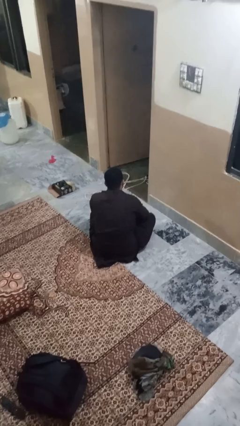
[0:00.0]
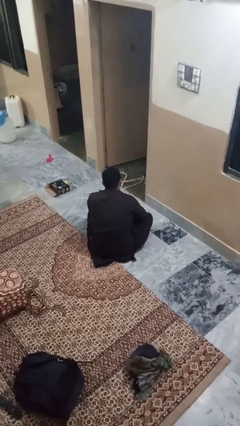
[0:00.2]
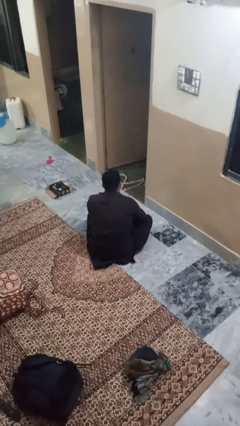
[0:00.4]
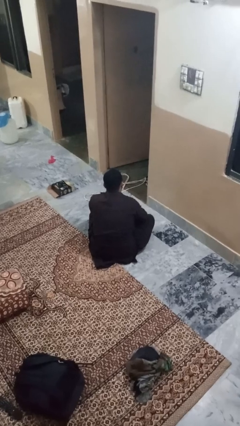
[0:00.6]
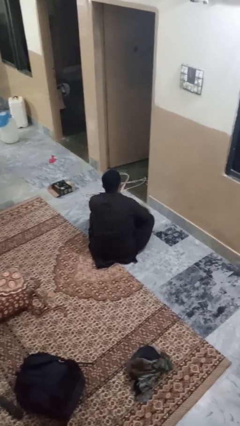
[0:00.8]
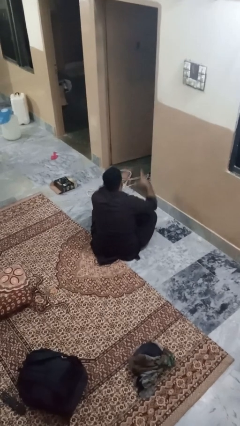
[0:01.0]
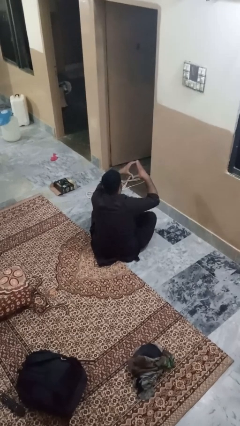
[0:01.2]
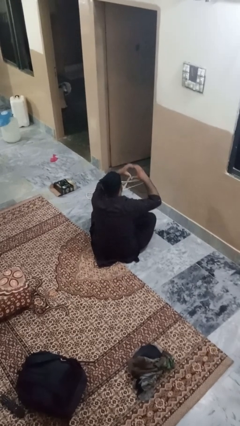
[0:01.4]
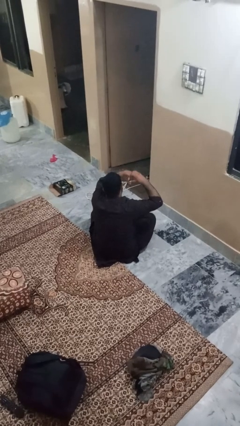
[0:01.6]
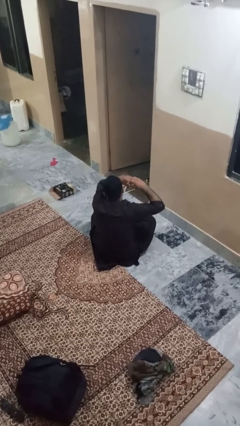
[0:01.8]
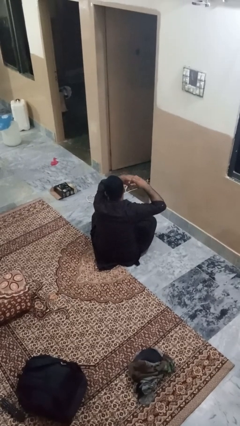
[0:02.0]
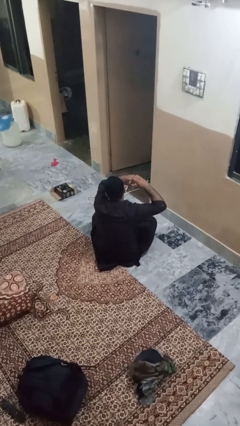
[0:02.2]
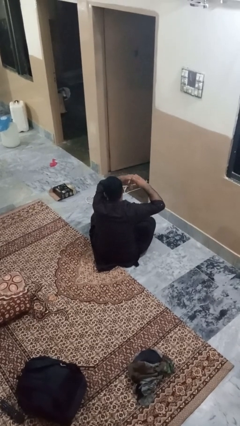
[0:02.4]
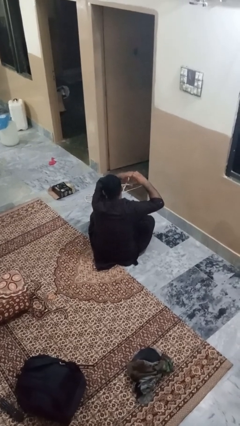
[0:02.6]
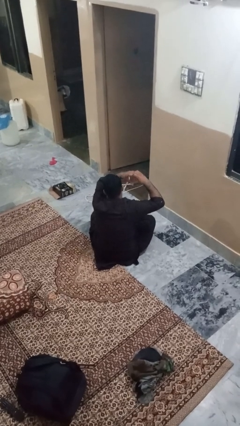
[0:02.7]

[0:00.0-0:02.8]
person gestures heart

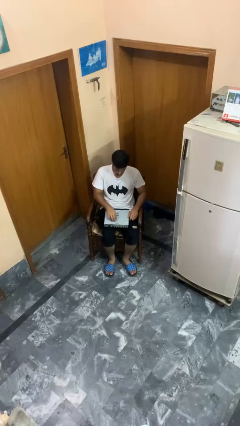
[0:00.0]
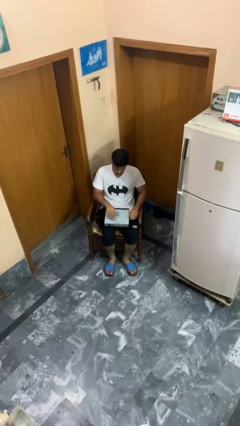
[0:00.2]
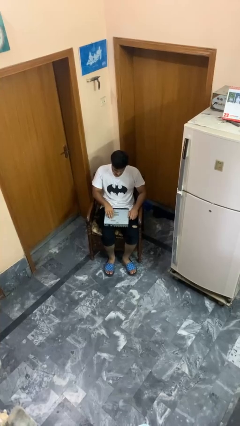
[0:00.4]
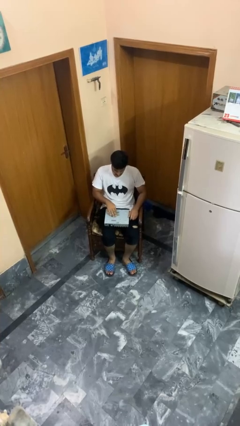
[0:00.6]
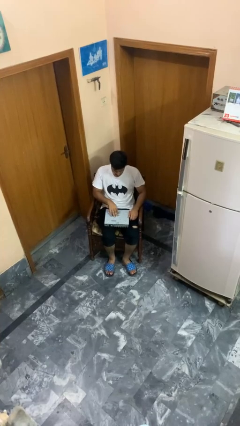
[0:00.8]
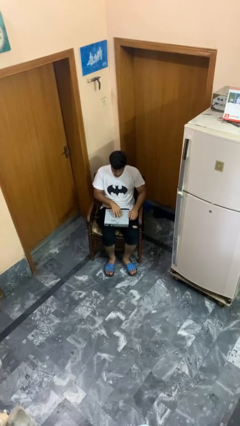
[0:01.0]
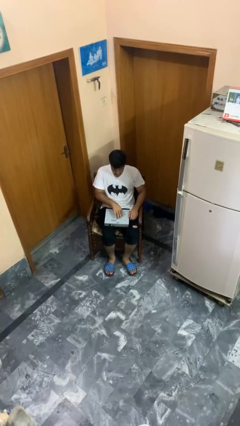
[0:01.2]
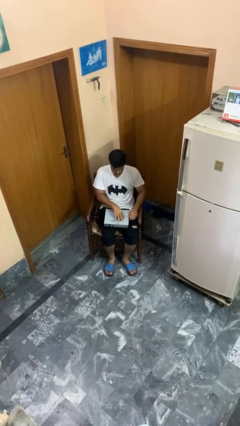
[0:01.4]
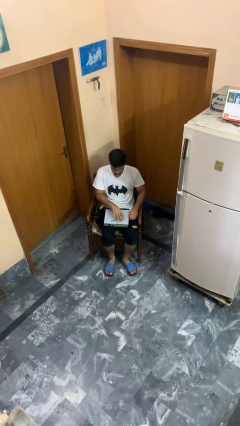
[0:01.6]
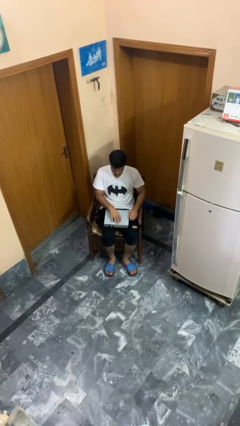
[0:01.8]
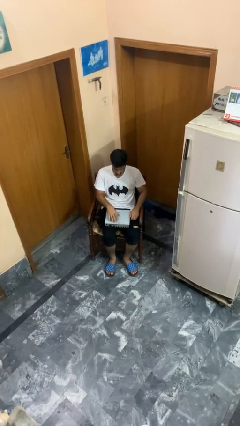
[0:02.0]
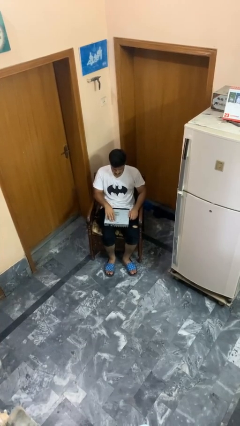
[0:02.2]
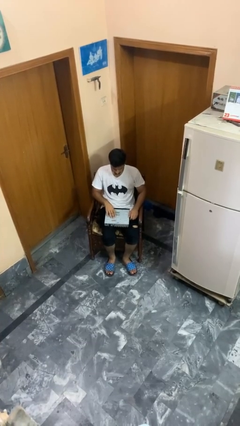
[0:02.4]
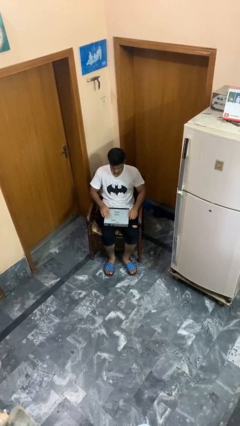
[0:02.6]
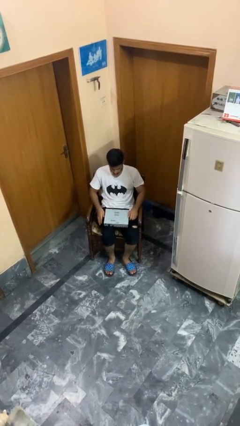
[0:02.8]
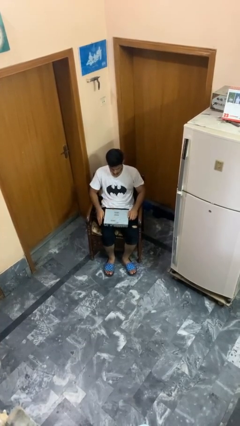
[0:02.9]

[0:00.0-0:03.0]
person taps object with finger

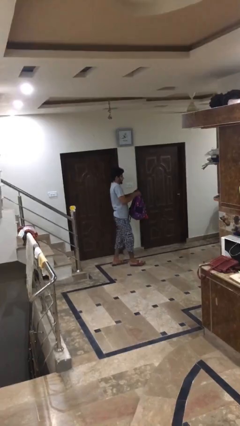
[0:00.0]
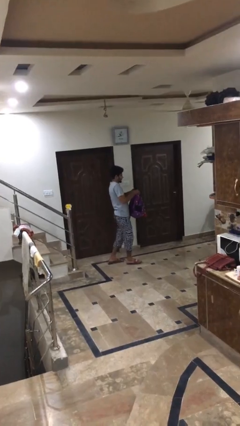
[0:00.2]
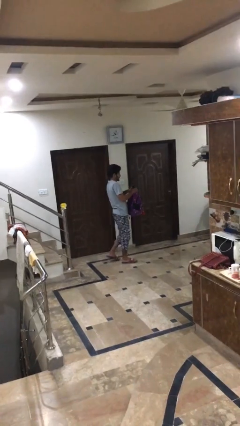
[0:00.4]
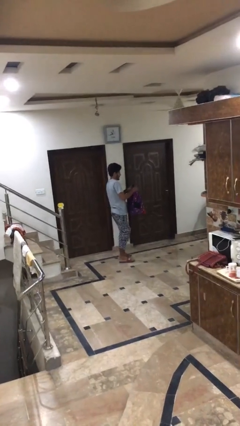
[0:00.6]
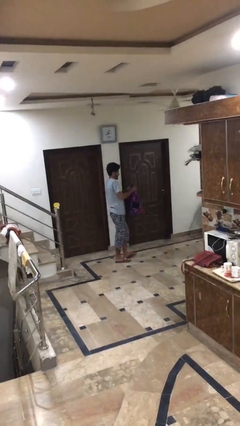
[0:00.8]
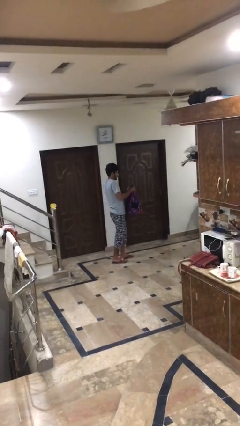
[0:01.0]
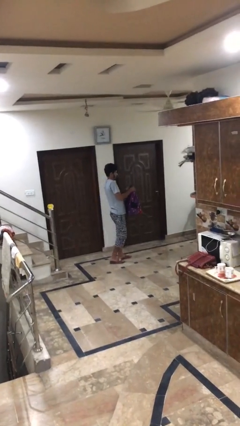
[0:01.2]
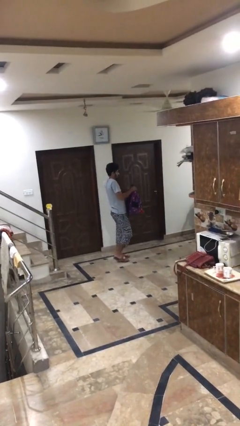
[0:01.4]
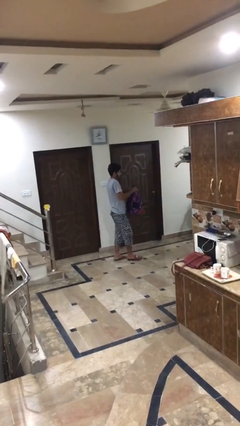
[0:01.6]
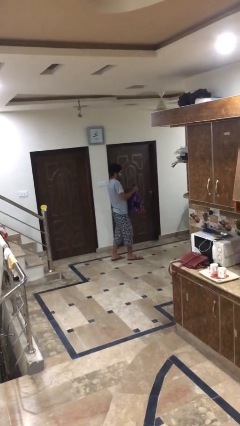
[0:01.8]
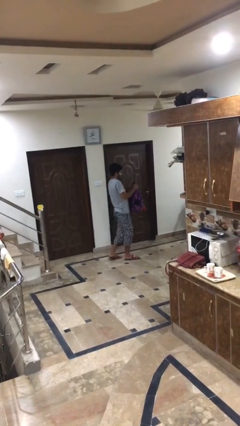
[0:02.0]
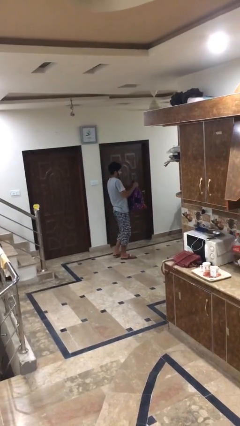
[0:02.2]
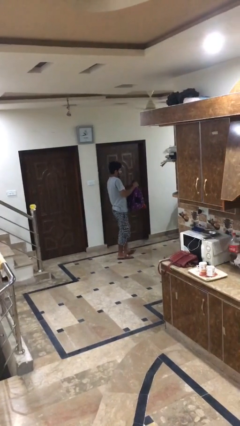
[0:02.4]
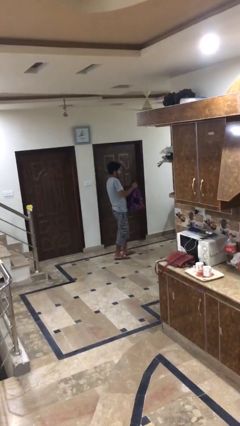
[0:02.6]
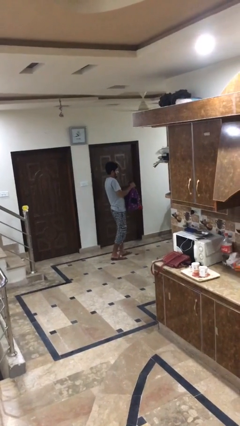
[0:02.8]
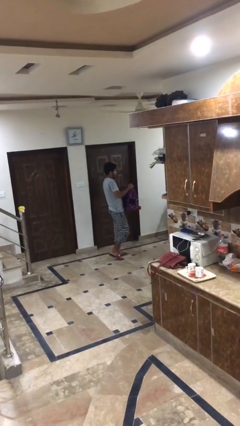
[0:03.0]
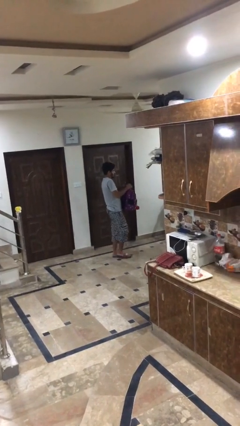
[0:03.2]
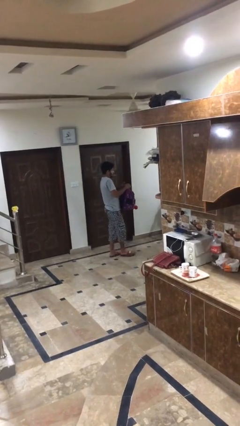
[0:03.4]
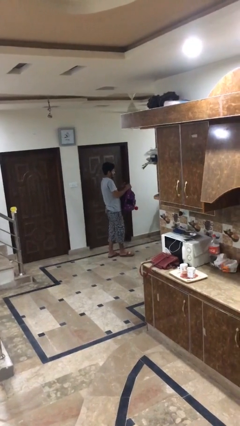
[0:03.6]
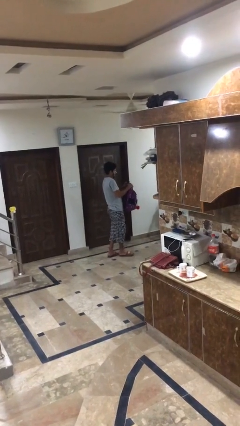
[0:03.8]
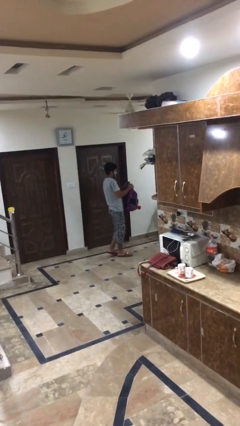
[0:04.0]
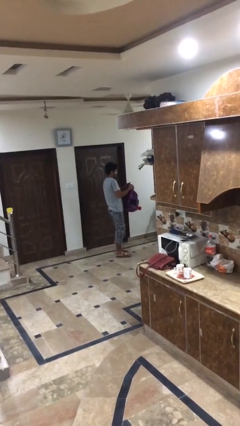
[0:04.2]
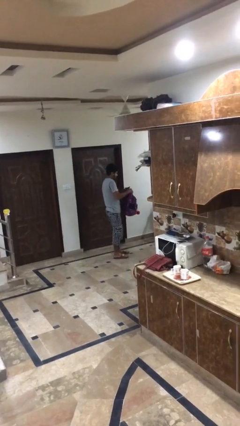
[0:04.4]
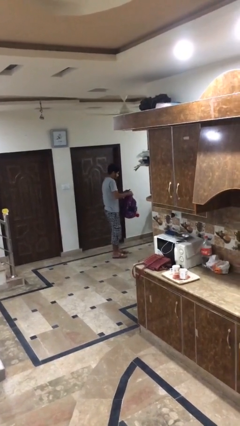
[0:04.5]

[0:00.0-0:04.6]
person carries heavy object

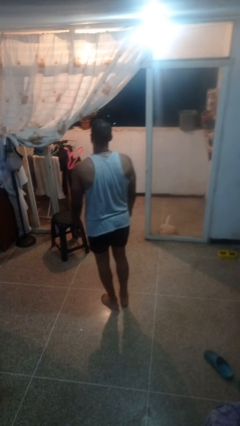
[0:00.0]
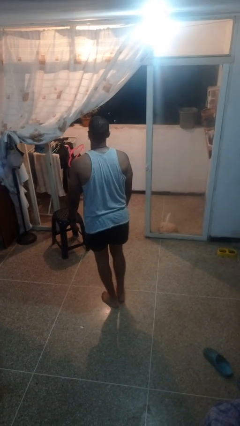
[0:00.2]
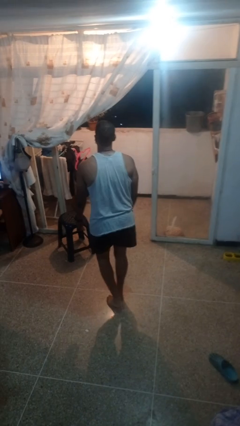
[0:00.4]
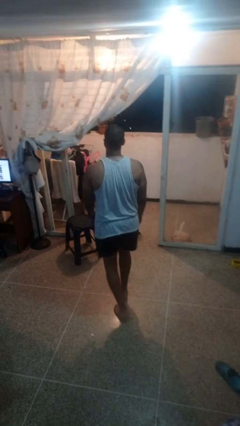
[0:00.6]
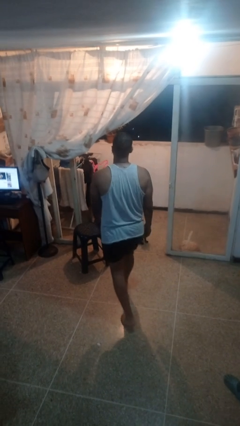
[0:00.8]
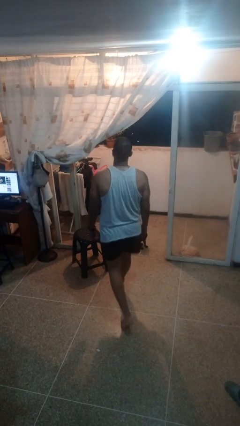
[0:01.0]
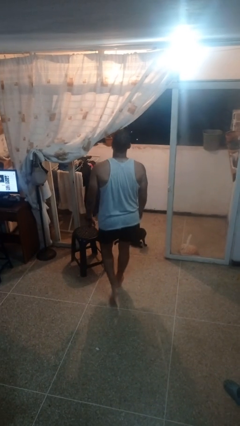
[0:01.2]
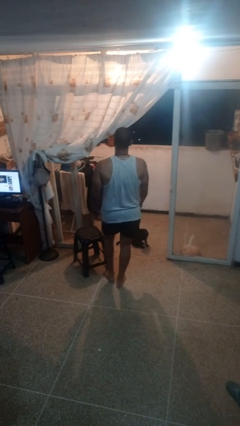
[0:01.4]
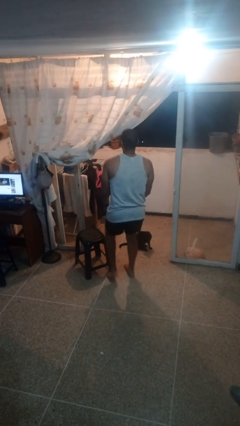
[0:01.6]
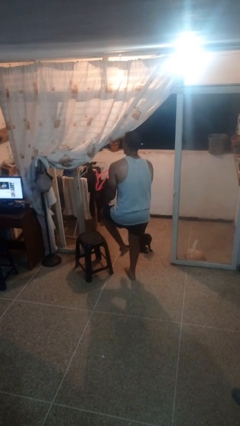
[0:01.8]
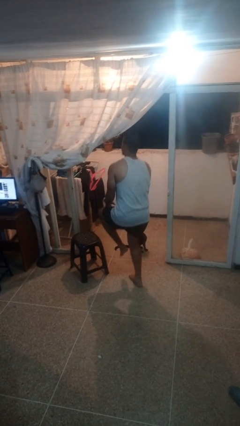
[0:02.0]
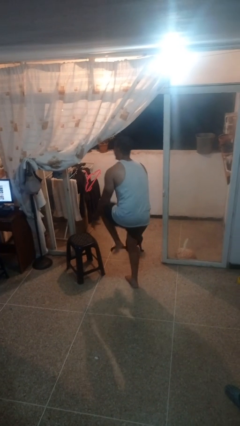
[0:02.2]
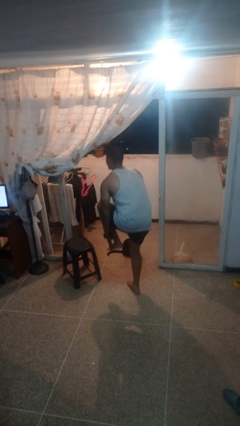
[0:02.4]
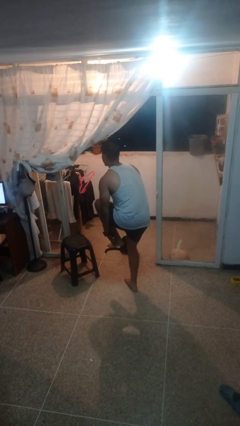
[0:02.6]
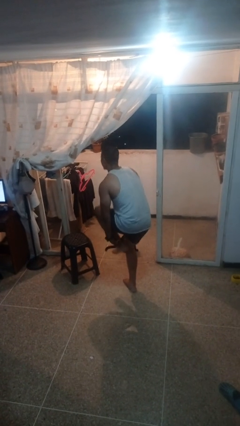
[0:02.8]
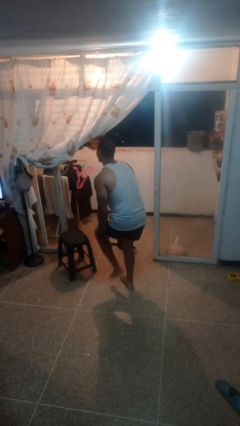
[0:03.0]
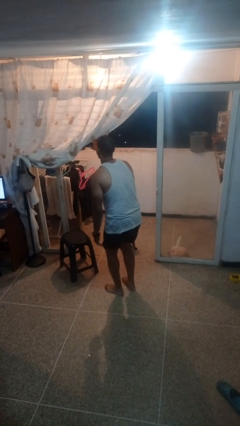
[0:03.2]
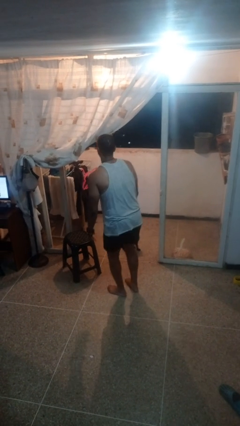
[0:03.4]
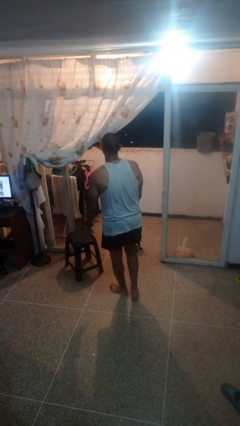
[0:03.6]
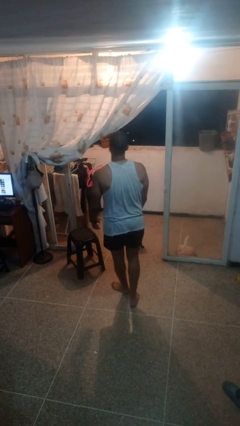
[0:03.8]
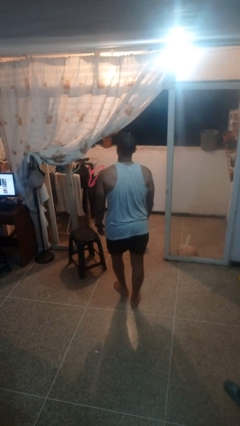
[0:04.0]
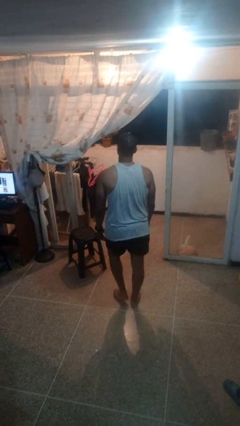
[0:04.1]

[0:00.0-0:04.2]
person stubs toe

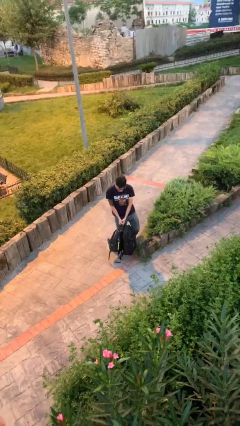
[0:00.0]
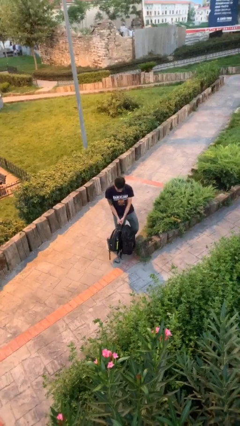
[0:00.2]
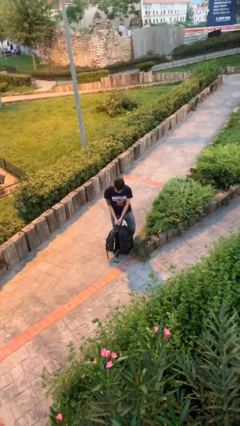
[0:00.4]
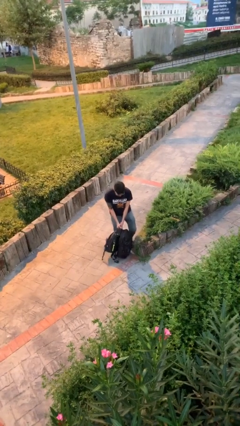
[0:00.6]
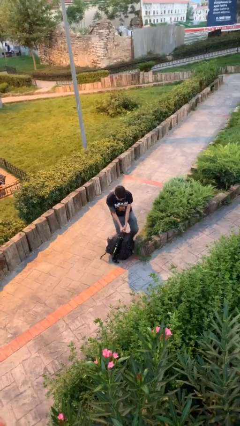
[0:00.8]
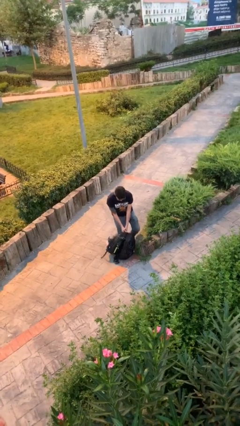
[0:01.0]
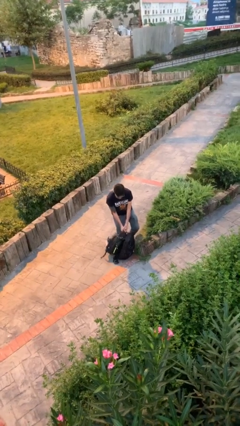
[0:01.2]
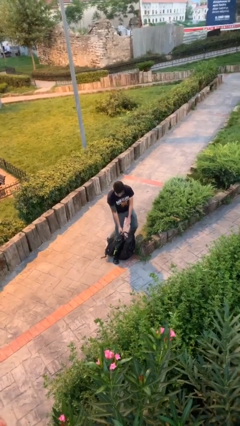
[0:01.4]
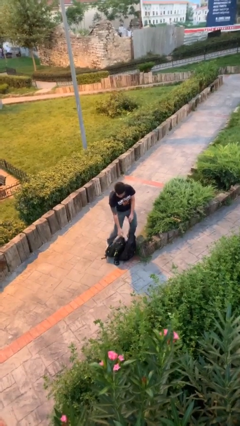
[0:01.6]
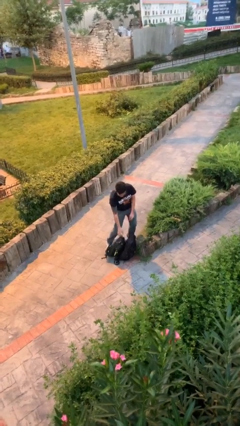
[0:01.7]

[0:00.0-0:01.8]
person puts down object on floor

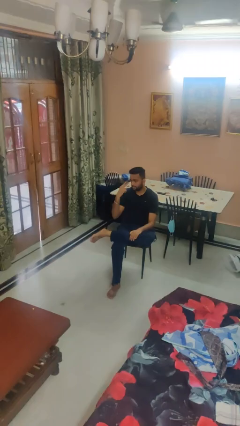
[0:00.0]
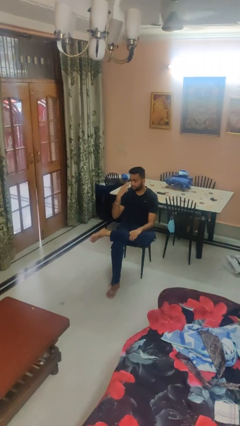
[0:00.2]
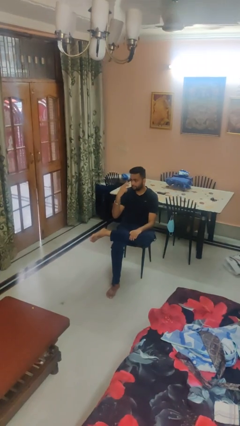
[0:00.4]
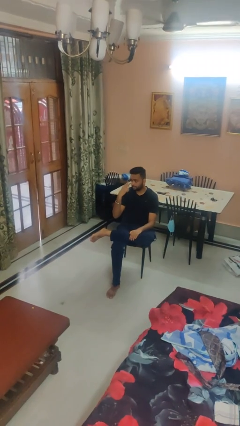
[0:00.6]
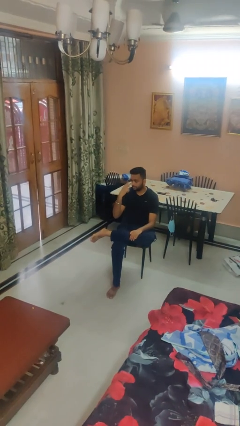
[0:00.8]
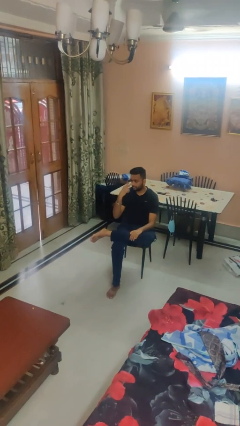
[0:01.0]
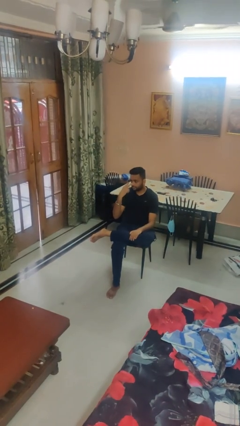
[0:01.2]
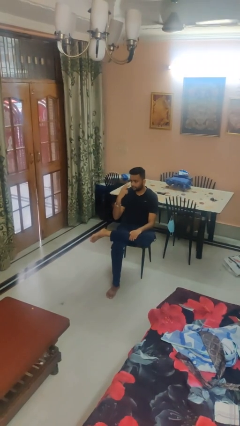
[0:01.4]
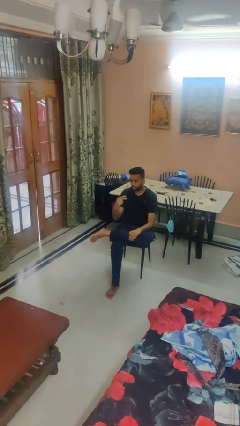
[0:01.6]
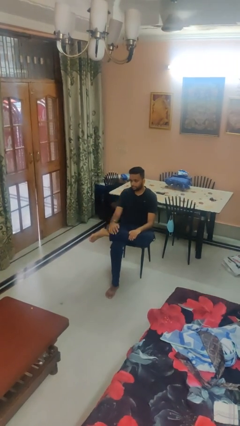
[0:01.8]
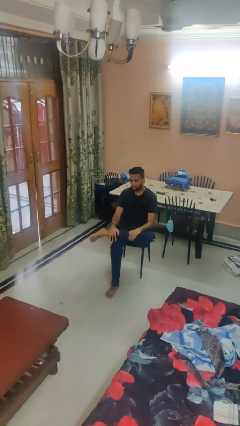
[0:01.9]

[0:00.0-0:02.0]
person gestures watch closely
